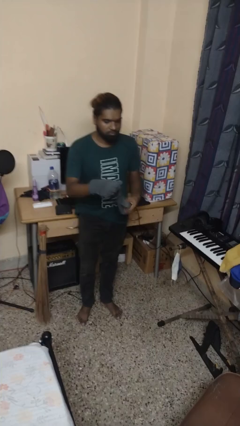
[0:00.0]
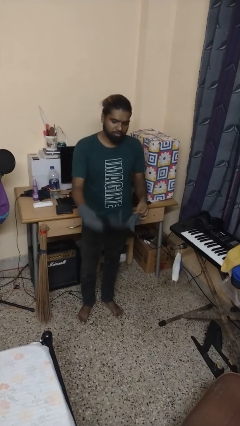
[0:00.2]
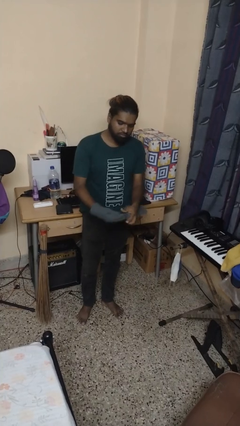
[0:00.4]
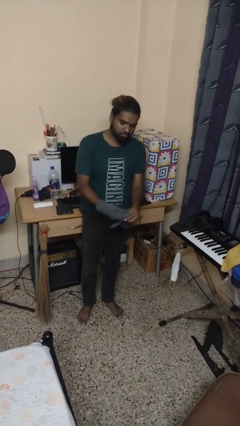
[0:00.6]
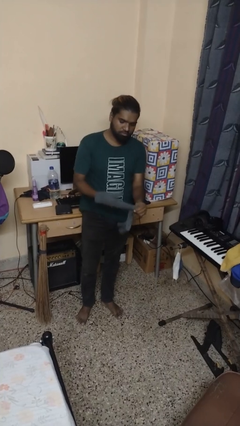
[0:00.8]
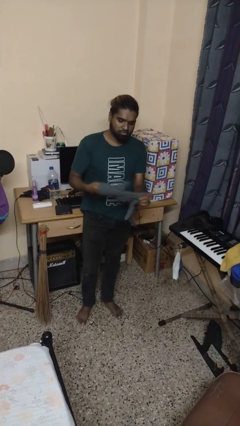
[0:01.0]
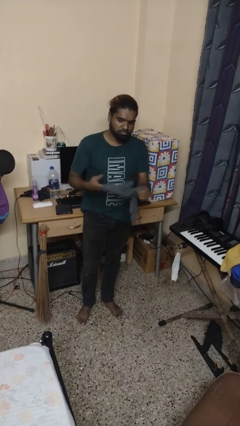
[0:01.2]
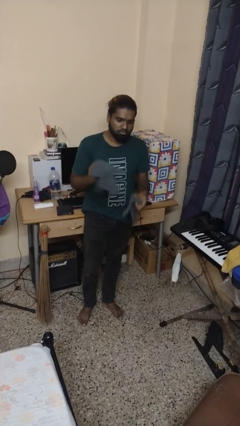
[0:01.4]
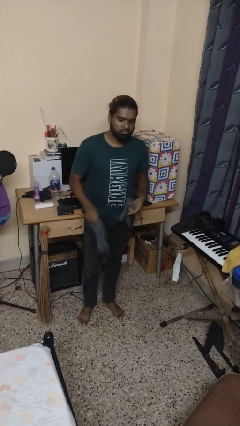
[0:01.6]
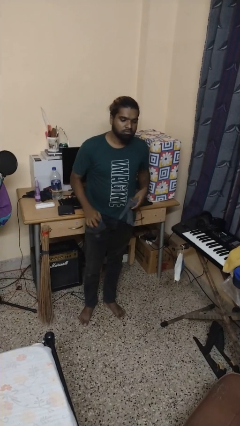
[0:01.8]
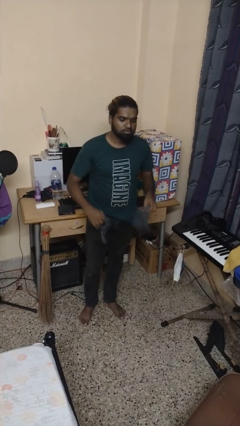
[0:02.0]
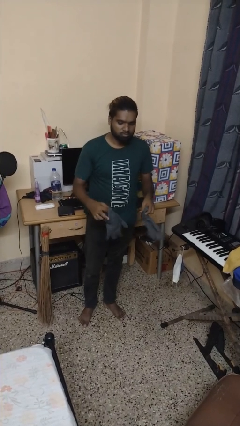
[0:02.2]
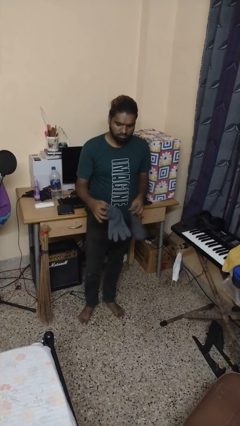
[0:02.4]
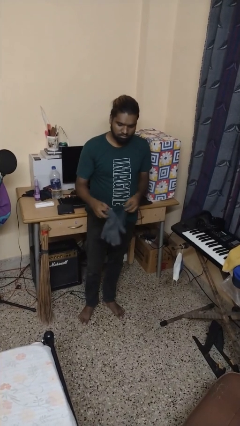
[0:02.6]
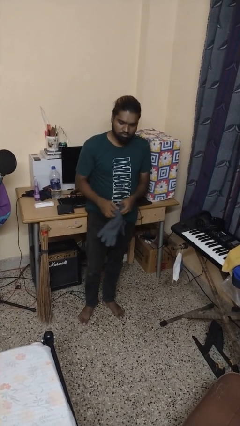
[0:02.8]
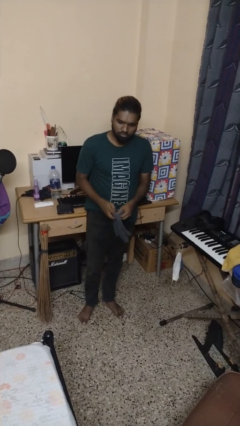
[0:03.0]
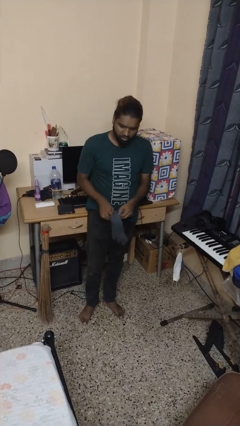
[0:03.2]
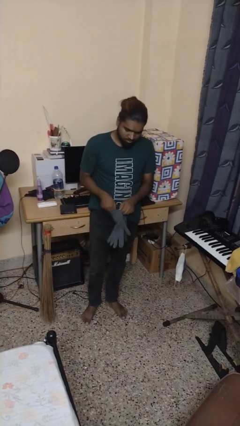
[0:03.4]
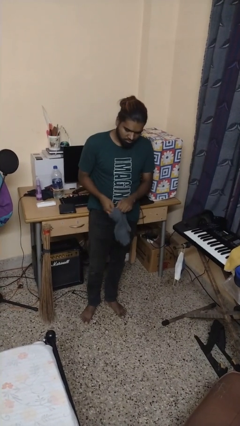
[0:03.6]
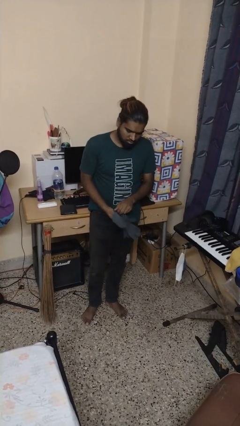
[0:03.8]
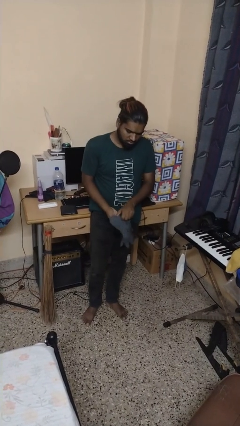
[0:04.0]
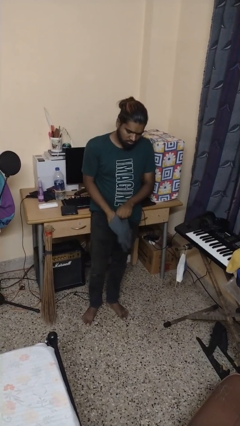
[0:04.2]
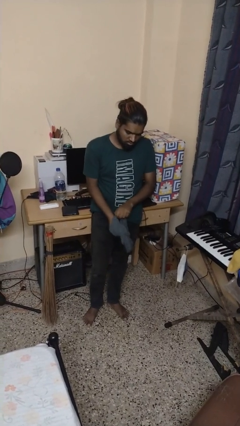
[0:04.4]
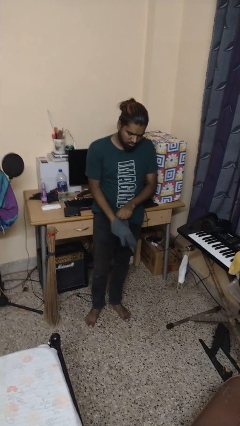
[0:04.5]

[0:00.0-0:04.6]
person takes off gloves

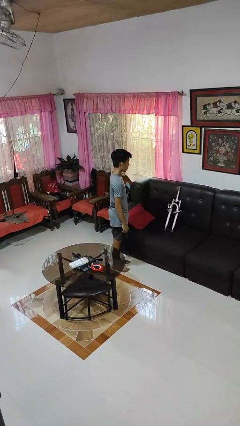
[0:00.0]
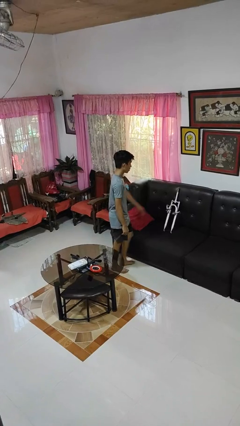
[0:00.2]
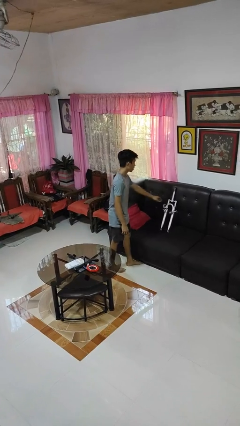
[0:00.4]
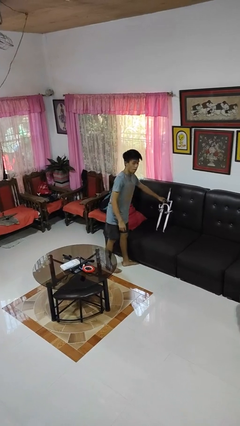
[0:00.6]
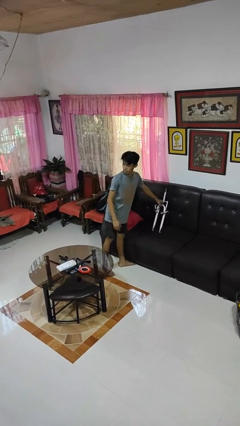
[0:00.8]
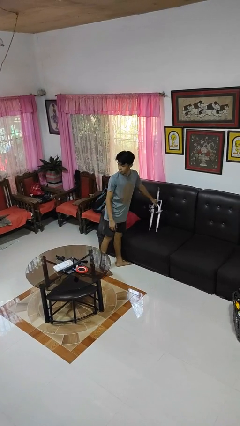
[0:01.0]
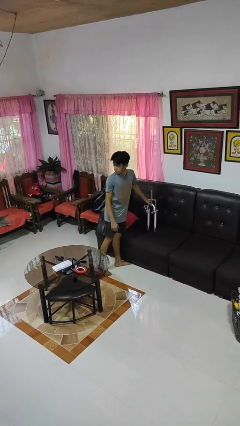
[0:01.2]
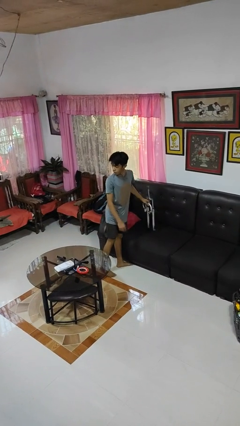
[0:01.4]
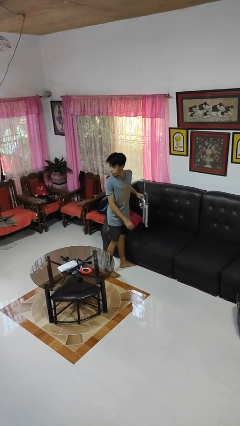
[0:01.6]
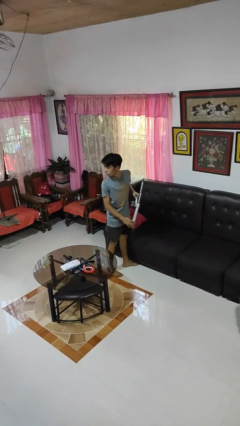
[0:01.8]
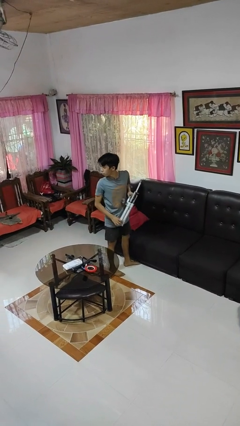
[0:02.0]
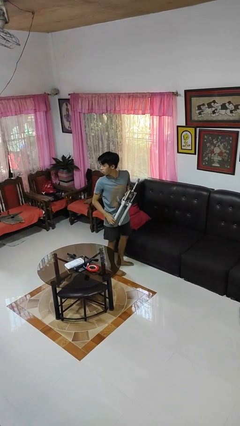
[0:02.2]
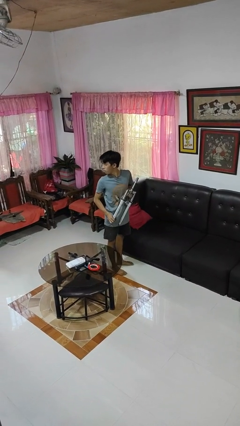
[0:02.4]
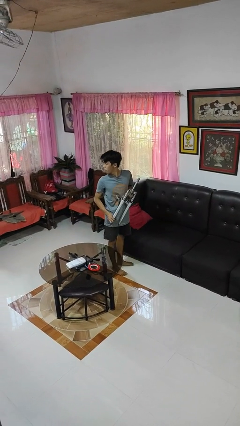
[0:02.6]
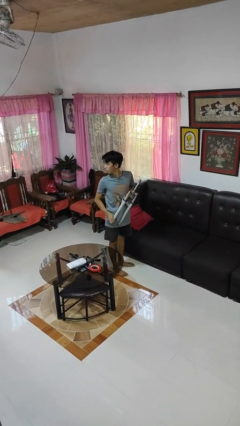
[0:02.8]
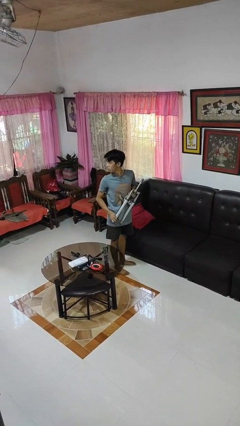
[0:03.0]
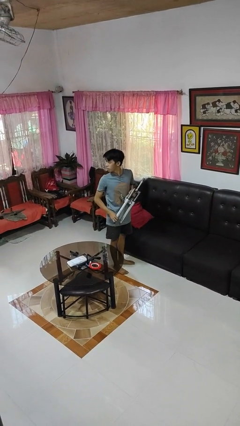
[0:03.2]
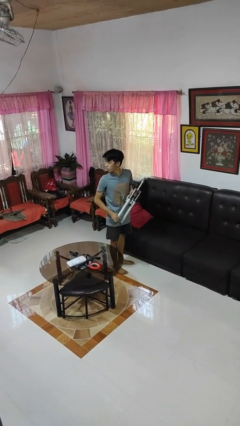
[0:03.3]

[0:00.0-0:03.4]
person picks up object from couch

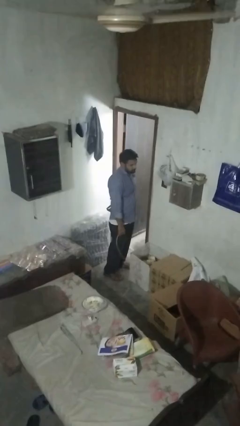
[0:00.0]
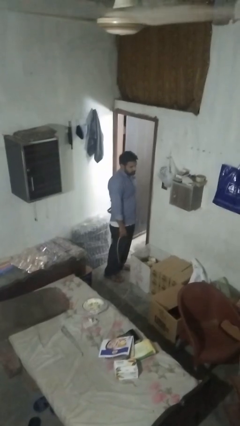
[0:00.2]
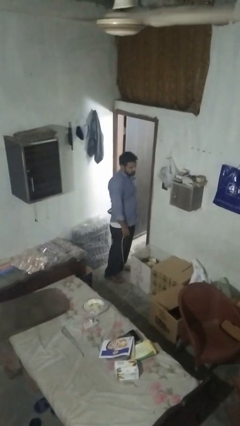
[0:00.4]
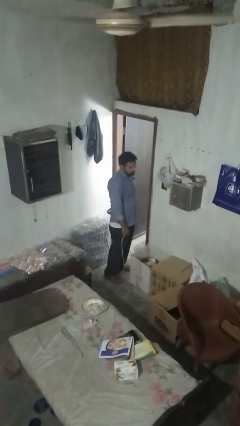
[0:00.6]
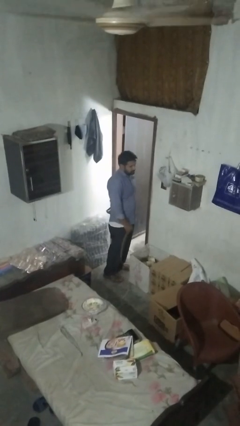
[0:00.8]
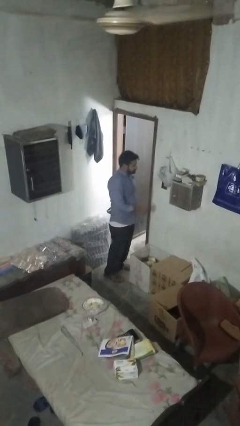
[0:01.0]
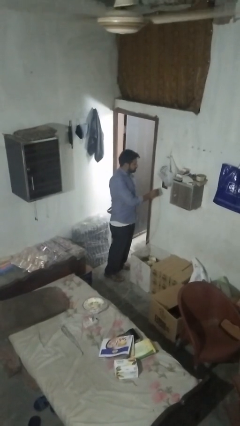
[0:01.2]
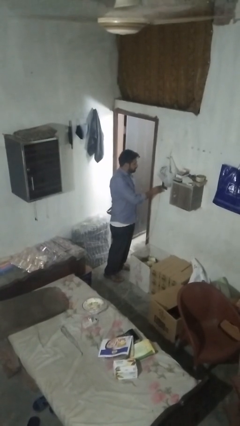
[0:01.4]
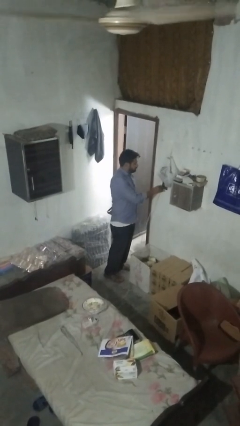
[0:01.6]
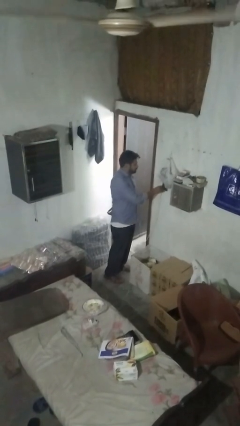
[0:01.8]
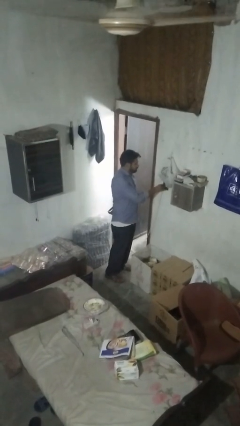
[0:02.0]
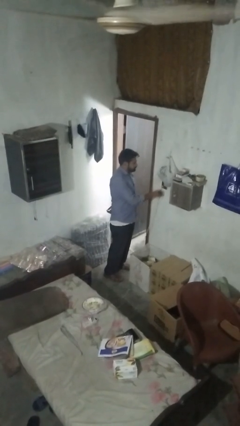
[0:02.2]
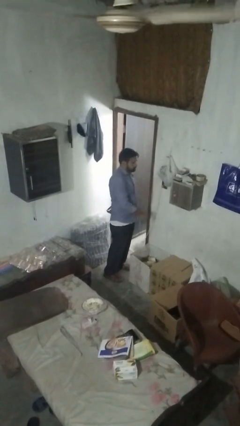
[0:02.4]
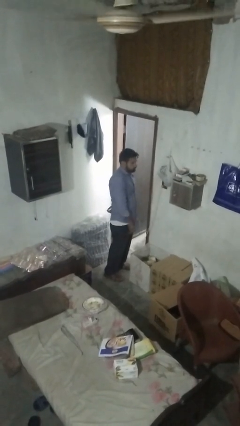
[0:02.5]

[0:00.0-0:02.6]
person plugs into electrical socket

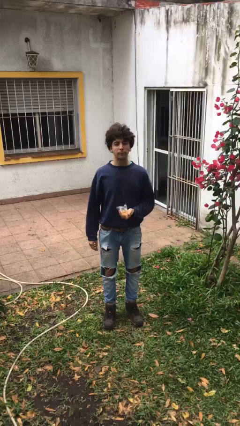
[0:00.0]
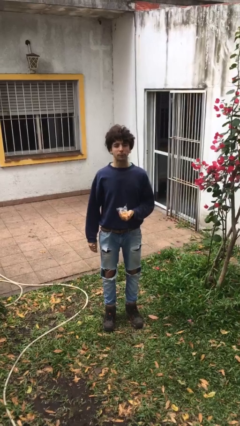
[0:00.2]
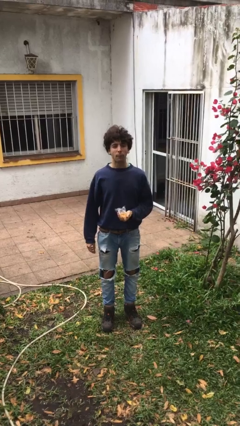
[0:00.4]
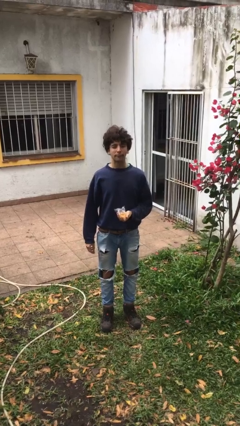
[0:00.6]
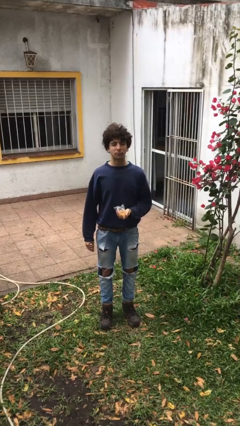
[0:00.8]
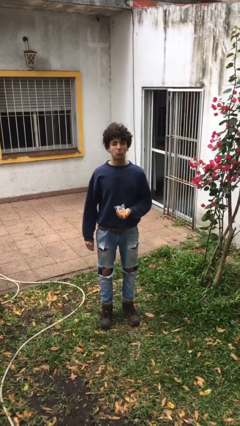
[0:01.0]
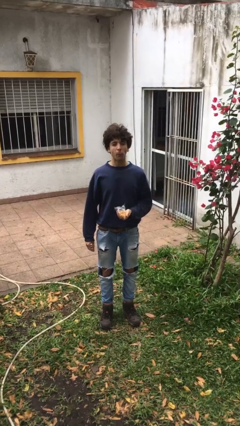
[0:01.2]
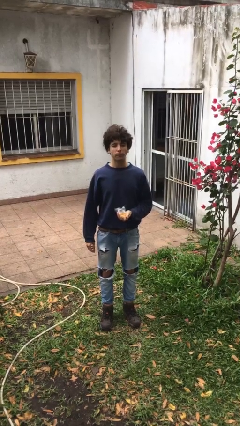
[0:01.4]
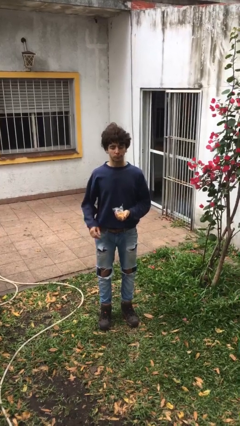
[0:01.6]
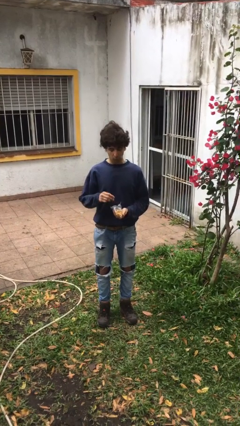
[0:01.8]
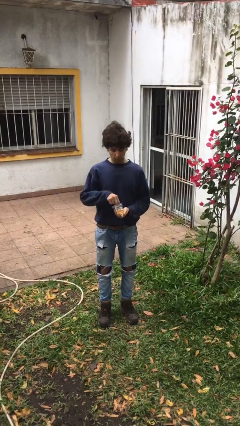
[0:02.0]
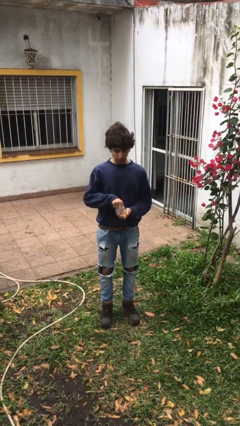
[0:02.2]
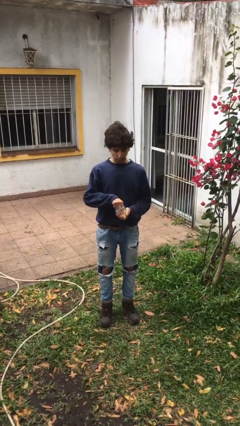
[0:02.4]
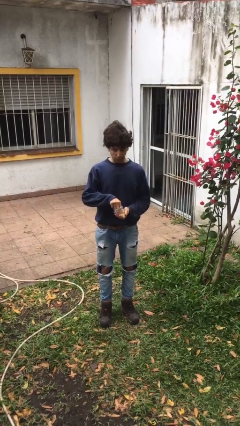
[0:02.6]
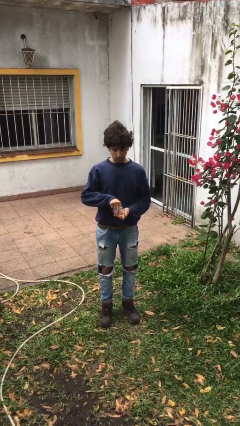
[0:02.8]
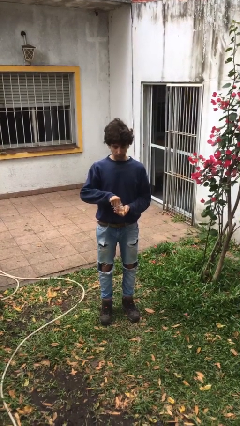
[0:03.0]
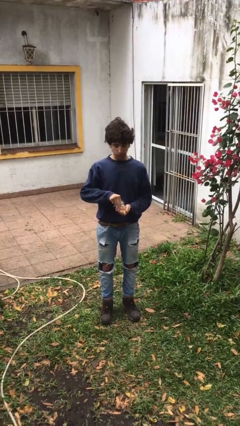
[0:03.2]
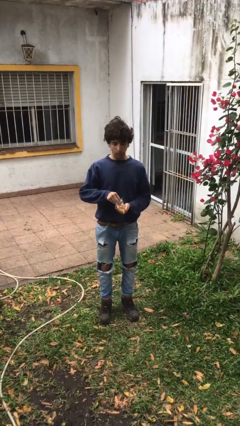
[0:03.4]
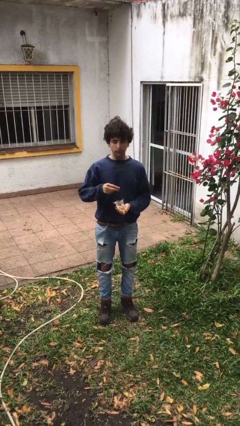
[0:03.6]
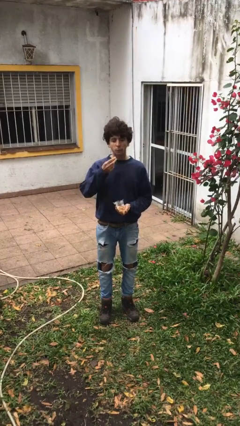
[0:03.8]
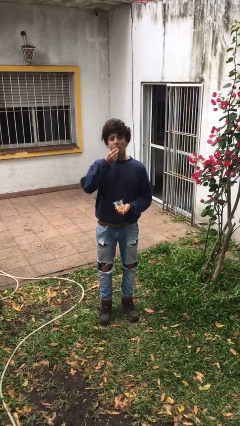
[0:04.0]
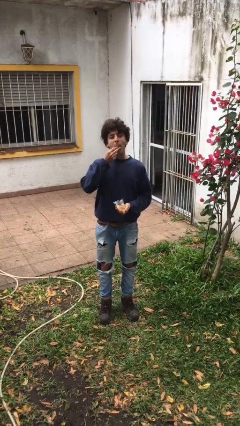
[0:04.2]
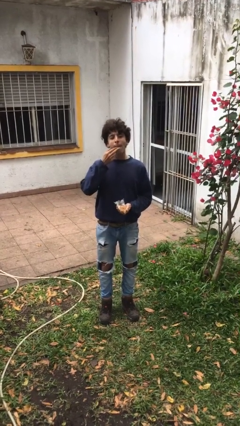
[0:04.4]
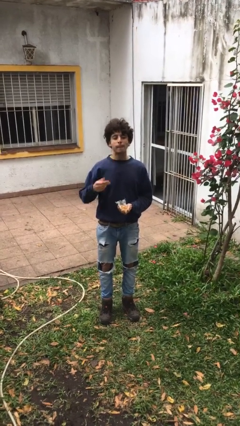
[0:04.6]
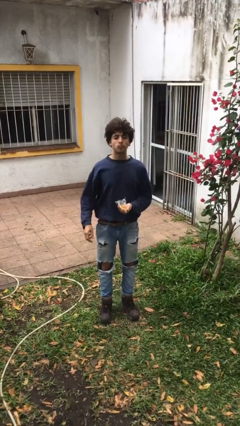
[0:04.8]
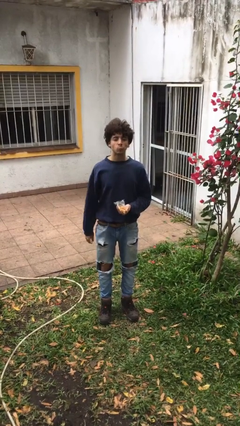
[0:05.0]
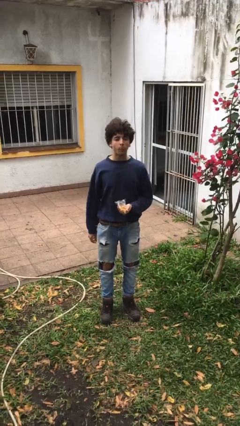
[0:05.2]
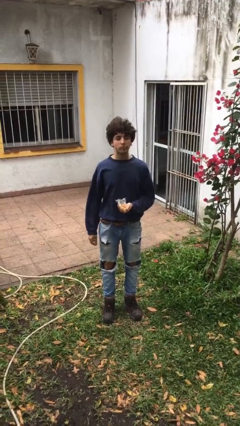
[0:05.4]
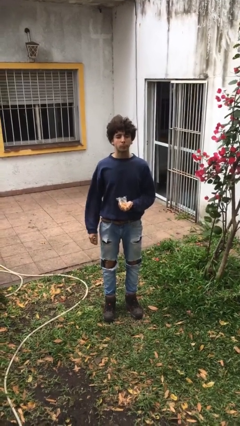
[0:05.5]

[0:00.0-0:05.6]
person eats snack from bag

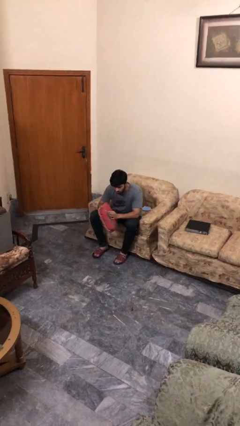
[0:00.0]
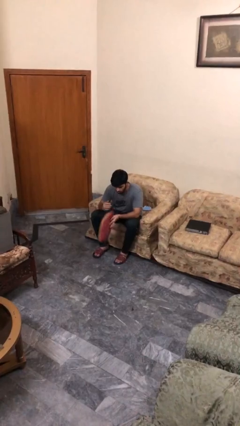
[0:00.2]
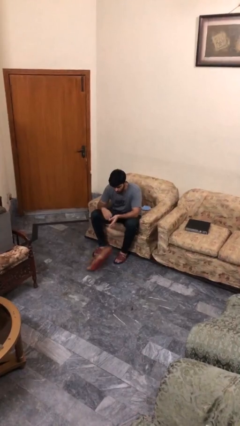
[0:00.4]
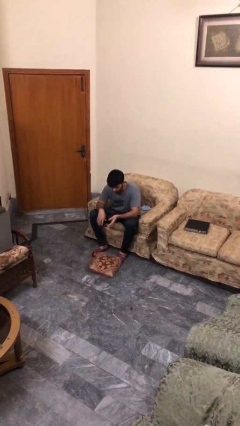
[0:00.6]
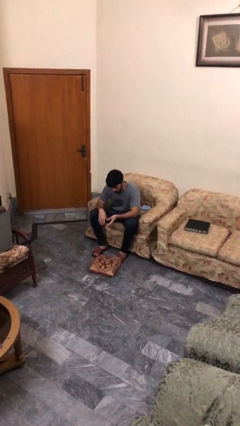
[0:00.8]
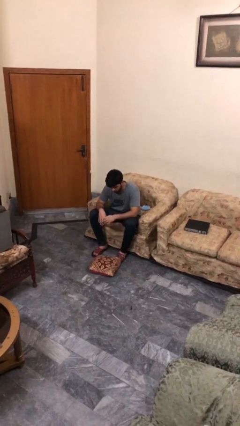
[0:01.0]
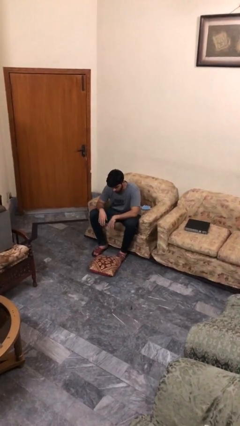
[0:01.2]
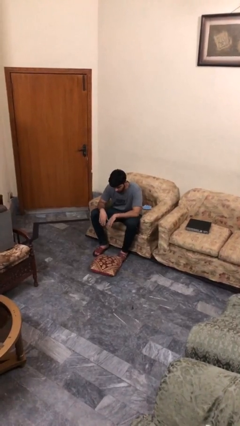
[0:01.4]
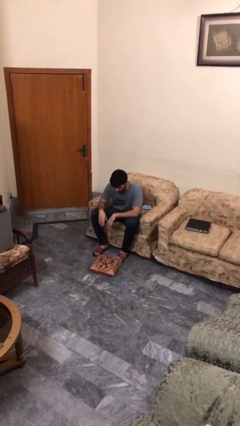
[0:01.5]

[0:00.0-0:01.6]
person drops object
